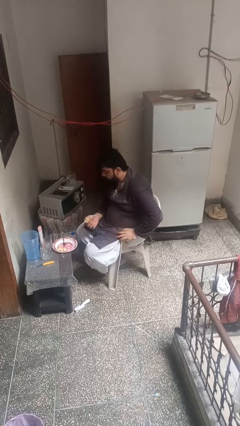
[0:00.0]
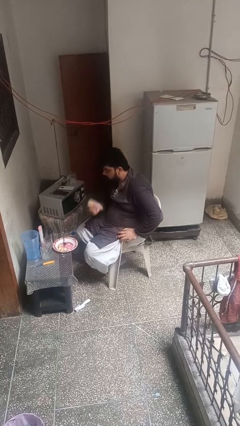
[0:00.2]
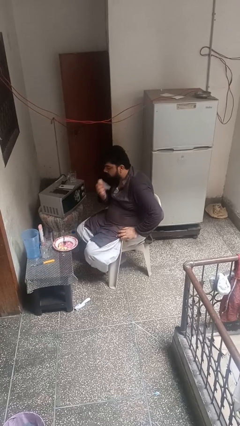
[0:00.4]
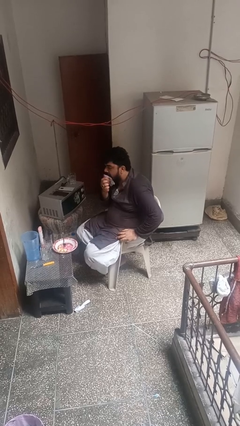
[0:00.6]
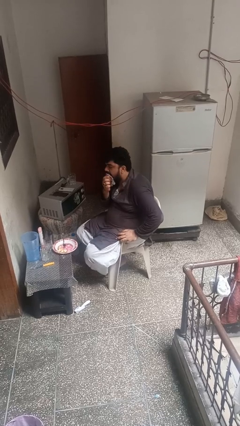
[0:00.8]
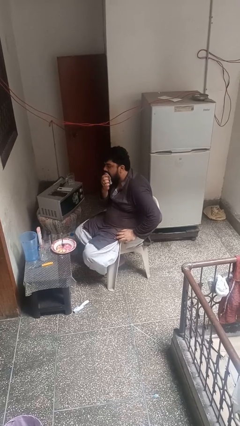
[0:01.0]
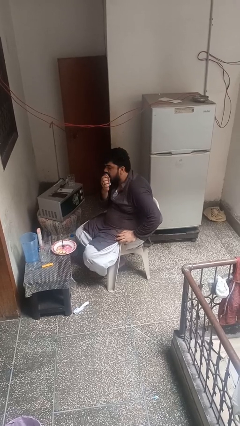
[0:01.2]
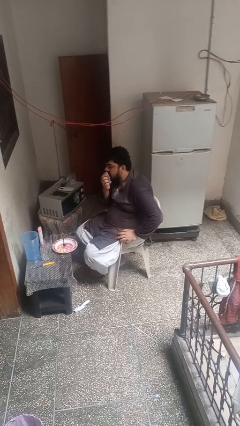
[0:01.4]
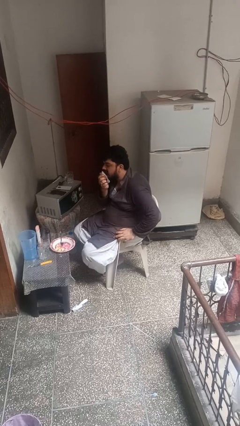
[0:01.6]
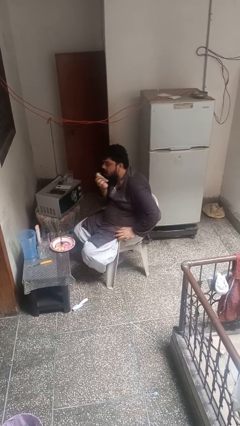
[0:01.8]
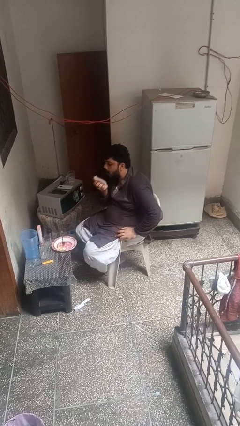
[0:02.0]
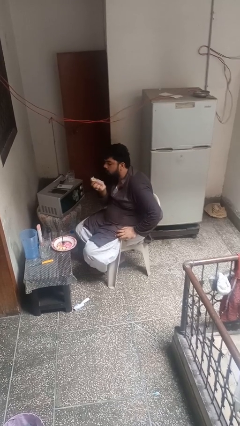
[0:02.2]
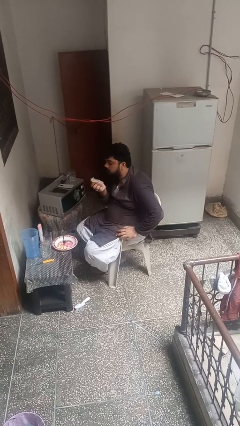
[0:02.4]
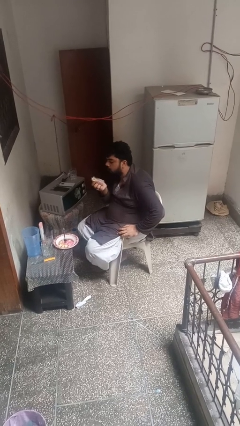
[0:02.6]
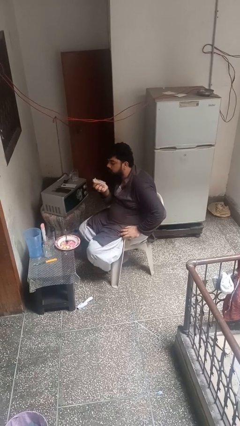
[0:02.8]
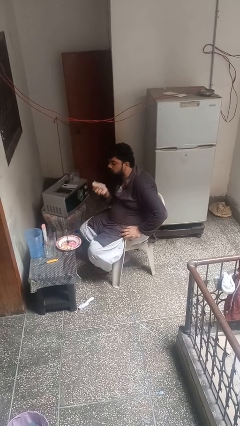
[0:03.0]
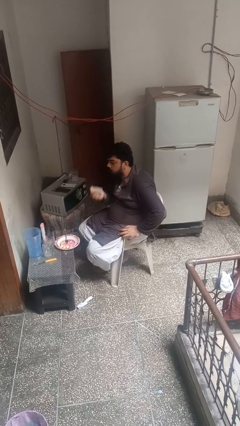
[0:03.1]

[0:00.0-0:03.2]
person eats with hands

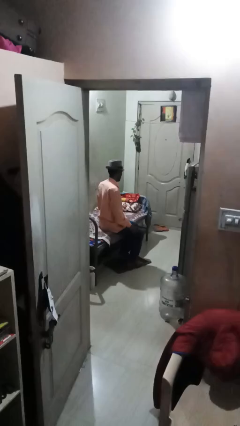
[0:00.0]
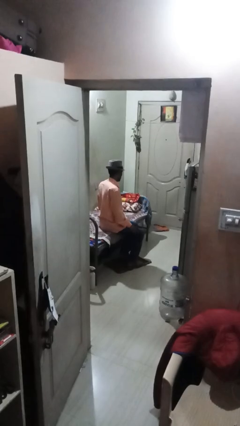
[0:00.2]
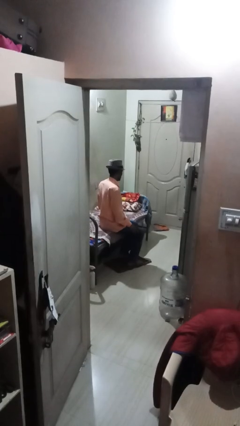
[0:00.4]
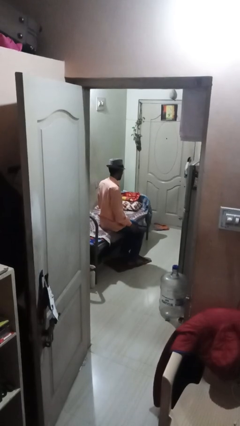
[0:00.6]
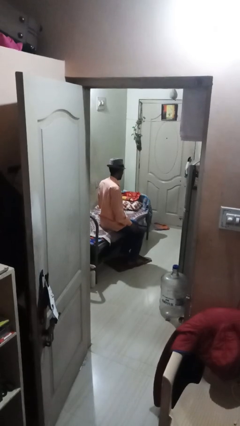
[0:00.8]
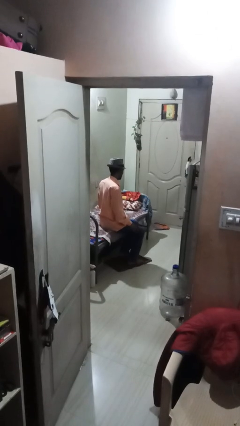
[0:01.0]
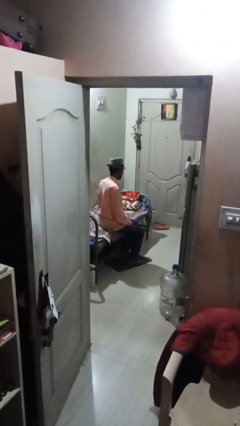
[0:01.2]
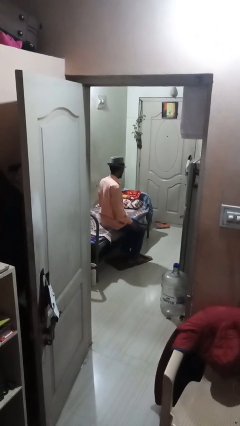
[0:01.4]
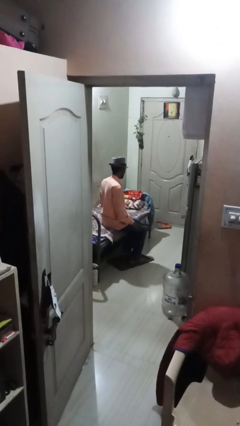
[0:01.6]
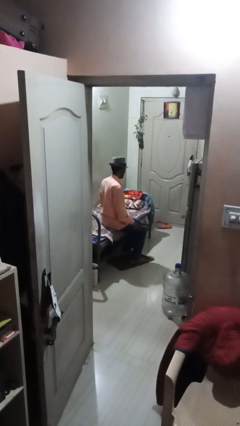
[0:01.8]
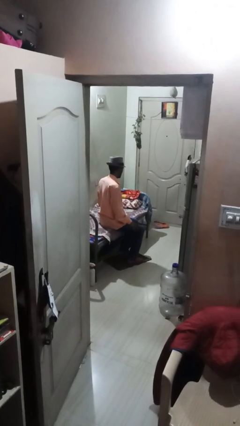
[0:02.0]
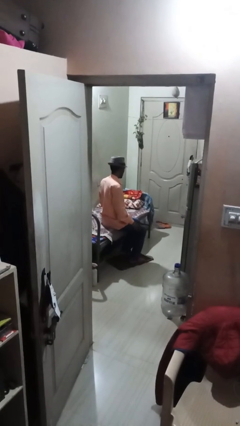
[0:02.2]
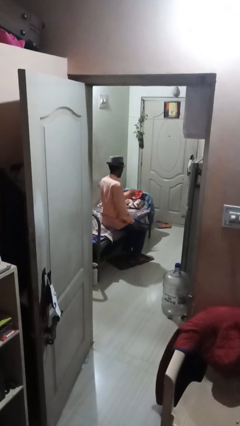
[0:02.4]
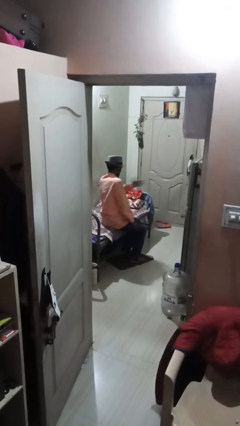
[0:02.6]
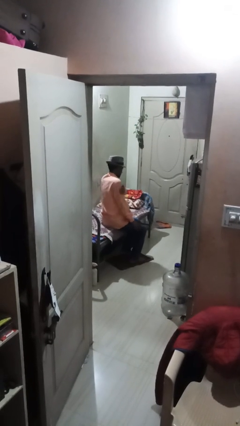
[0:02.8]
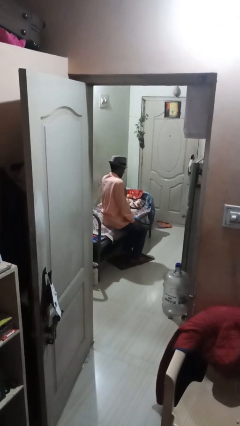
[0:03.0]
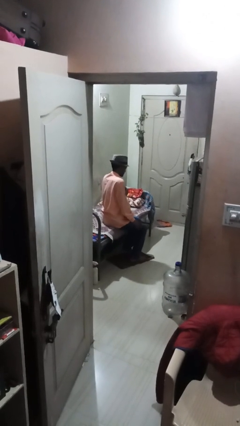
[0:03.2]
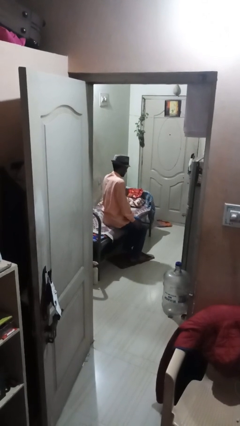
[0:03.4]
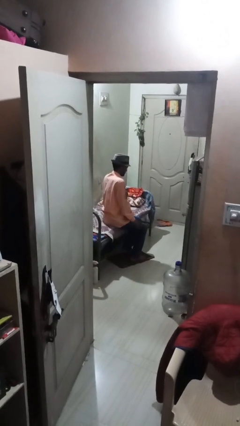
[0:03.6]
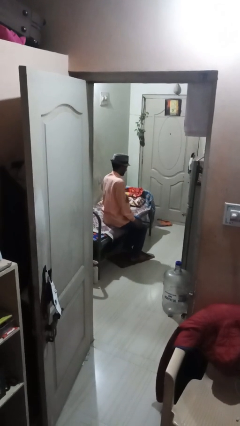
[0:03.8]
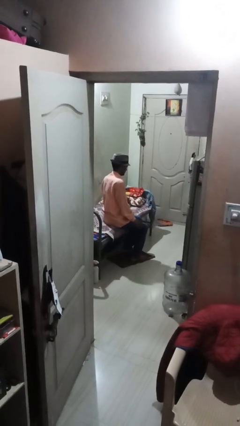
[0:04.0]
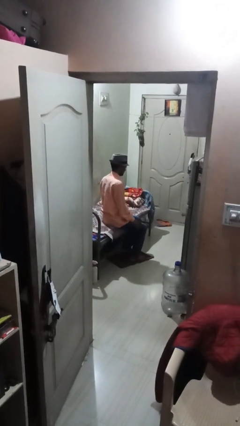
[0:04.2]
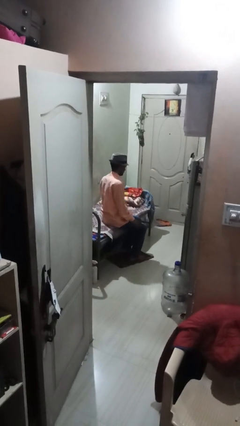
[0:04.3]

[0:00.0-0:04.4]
person swats bug

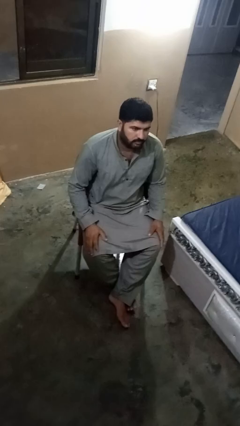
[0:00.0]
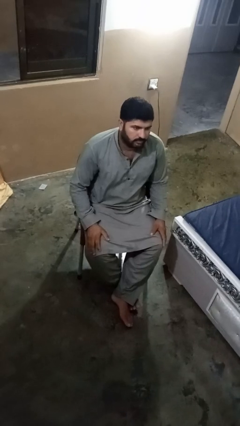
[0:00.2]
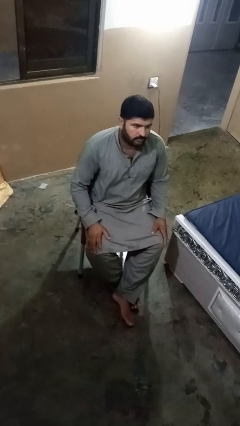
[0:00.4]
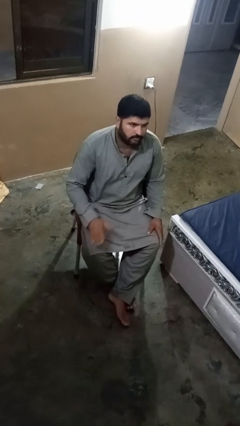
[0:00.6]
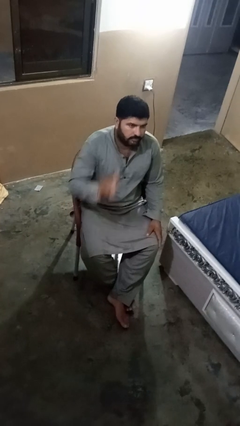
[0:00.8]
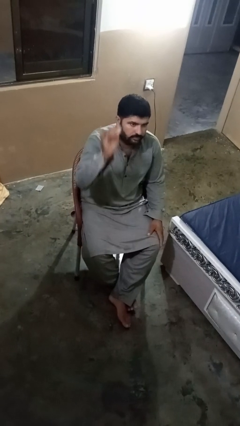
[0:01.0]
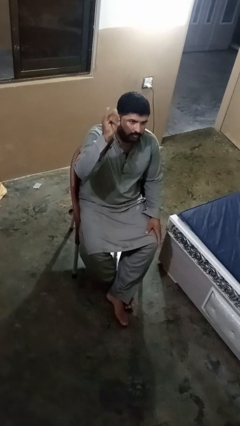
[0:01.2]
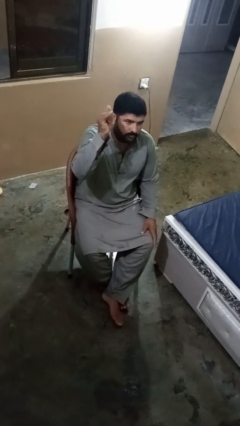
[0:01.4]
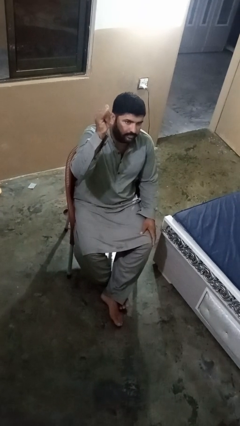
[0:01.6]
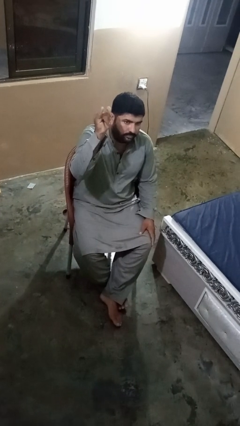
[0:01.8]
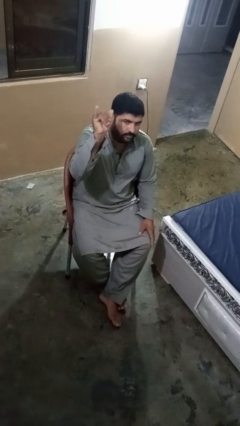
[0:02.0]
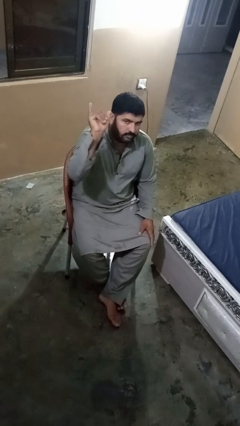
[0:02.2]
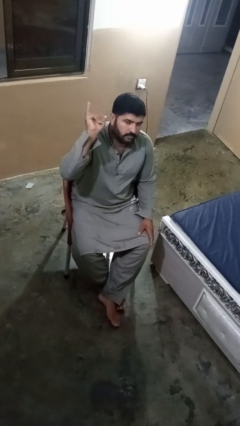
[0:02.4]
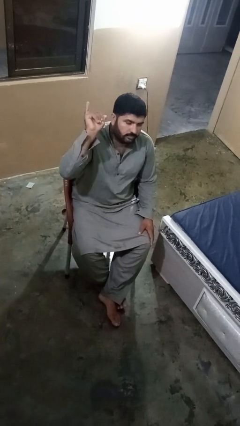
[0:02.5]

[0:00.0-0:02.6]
person gestures hang loose

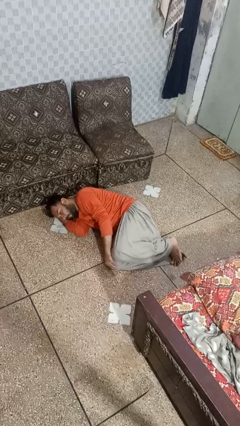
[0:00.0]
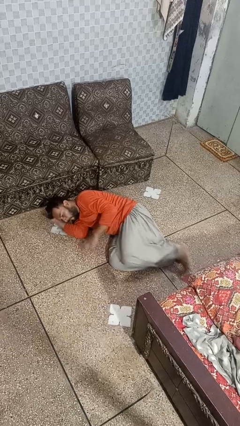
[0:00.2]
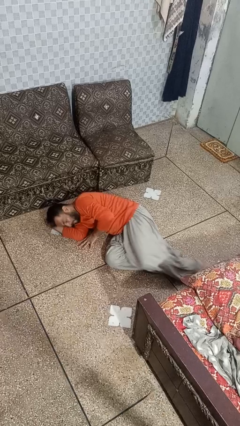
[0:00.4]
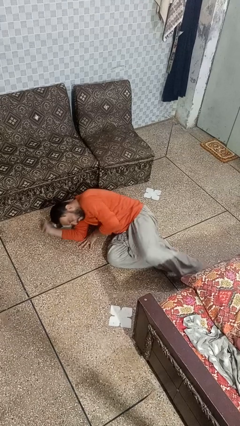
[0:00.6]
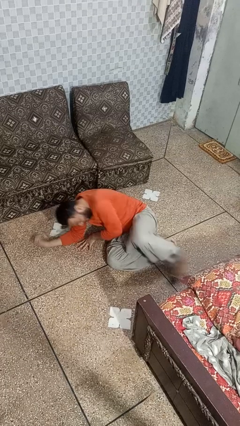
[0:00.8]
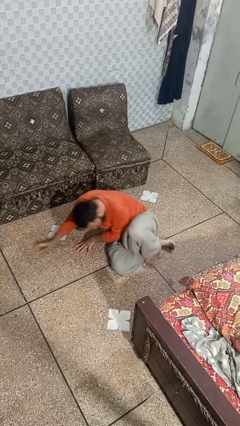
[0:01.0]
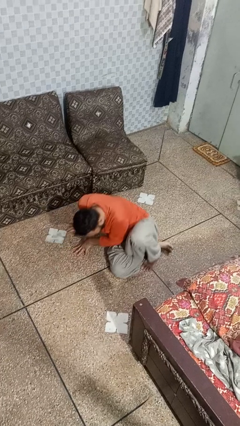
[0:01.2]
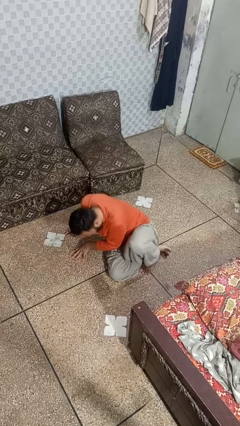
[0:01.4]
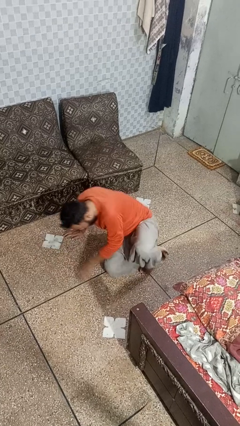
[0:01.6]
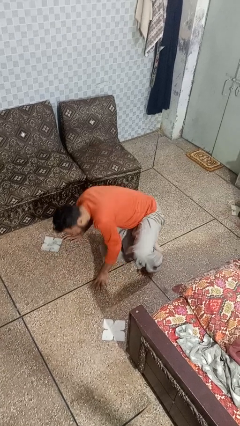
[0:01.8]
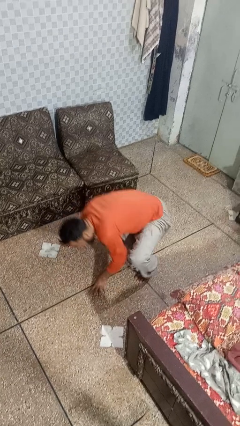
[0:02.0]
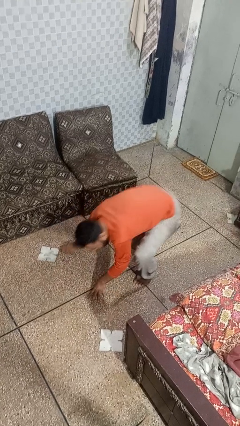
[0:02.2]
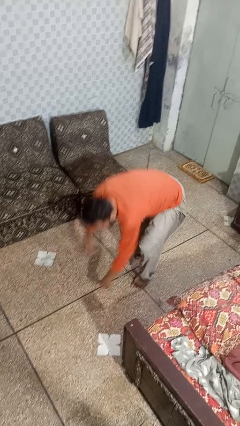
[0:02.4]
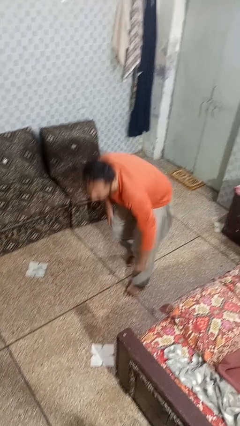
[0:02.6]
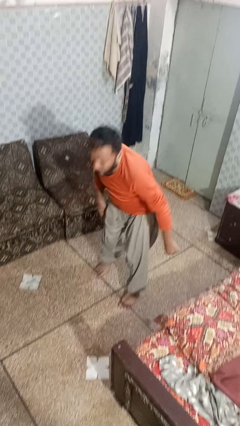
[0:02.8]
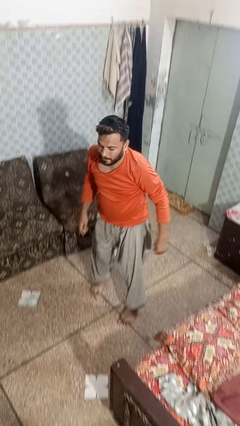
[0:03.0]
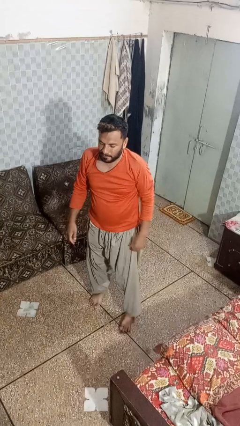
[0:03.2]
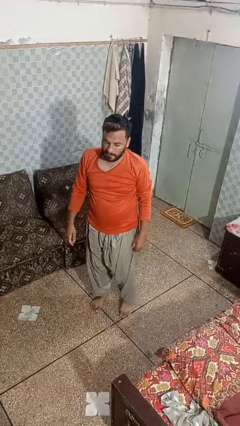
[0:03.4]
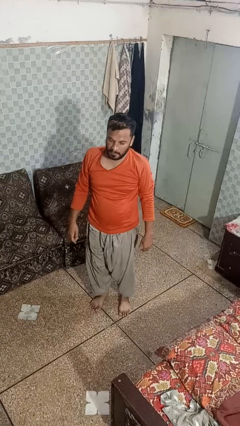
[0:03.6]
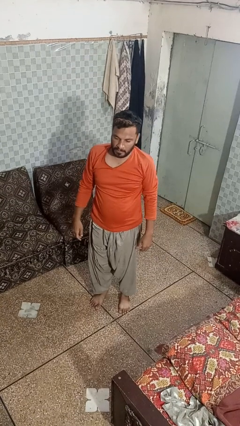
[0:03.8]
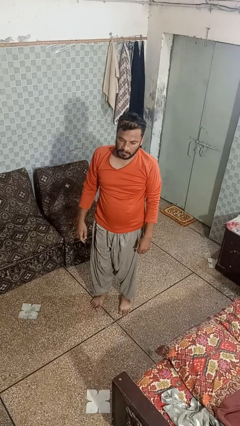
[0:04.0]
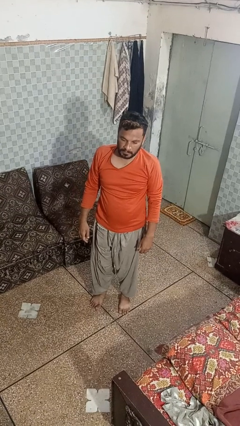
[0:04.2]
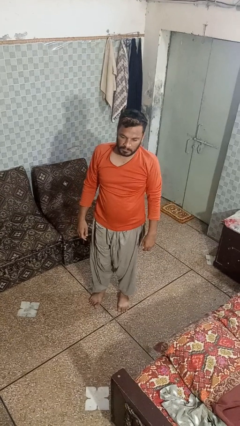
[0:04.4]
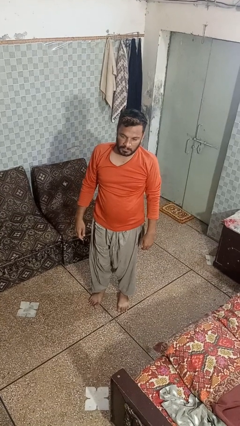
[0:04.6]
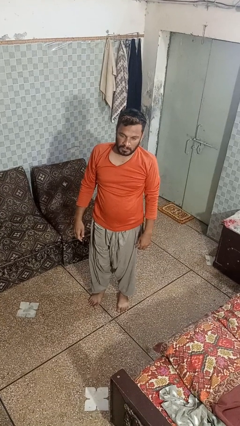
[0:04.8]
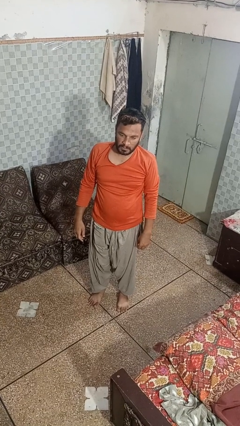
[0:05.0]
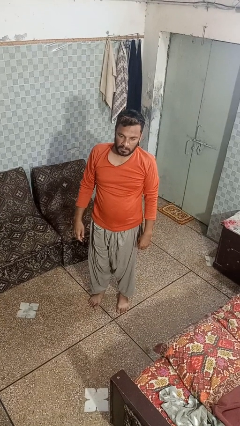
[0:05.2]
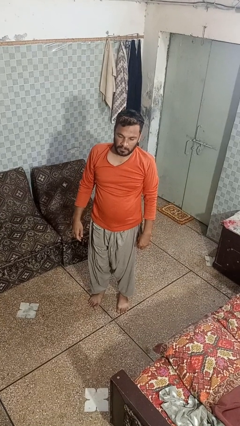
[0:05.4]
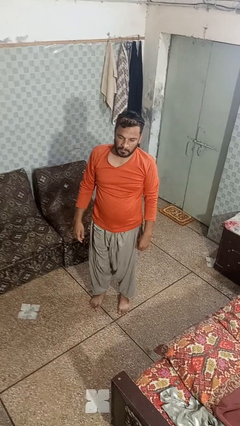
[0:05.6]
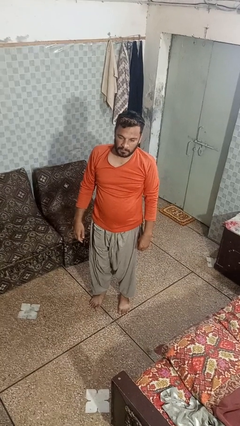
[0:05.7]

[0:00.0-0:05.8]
person stands up from floor

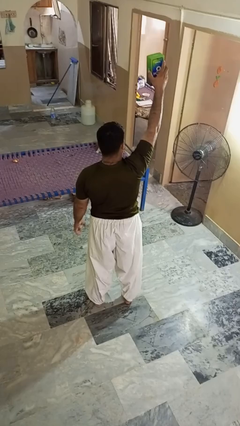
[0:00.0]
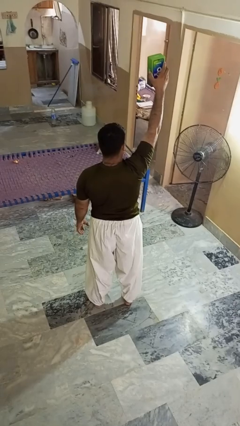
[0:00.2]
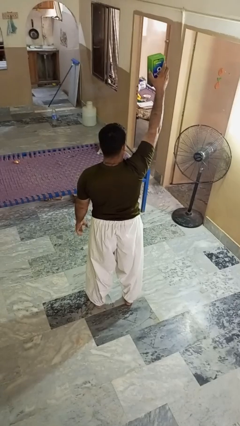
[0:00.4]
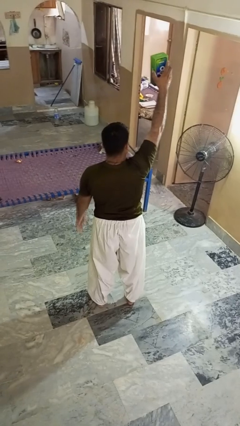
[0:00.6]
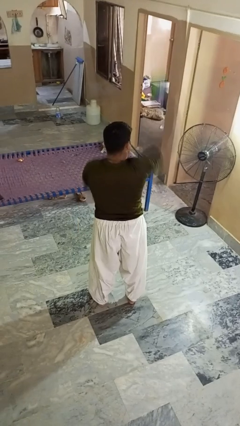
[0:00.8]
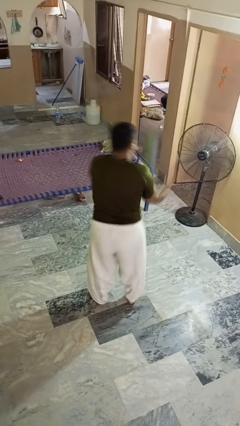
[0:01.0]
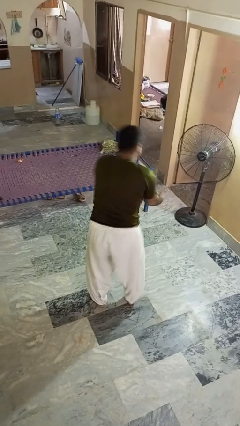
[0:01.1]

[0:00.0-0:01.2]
person drops object

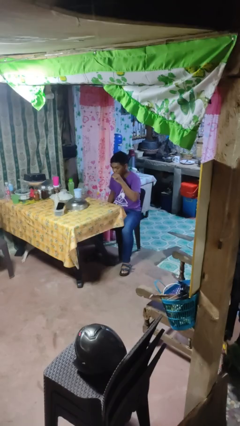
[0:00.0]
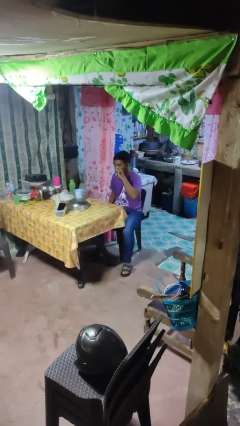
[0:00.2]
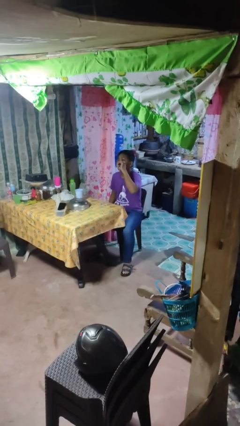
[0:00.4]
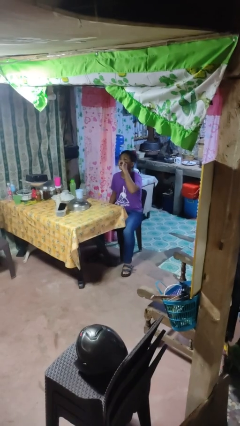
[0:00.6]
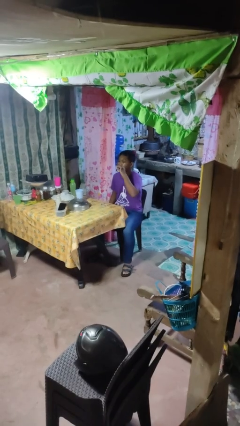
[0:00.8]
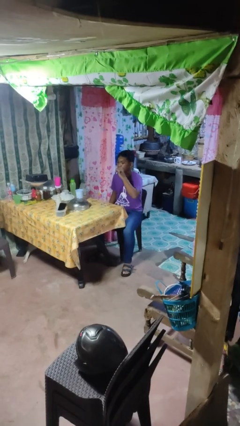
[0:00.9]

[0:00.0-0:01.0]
person drinks from shotglass
